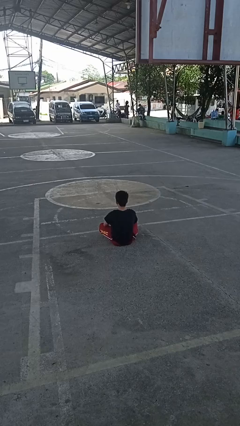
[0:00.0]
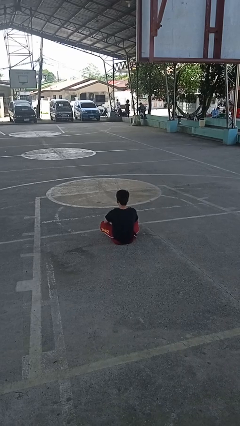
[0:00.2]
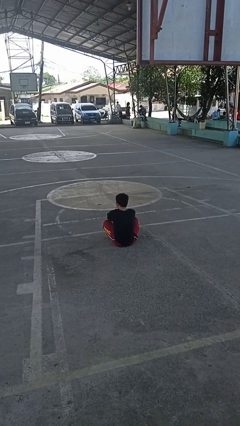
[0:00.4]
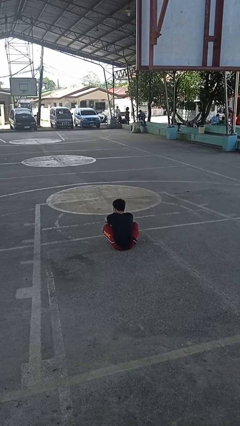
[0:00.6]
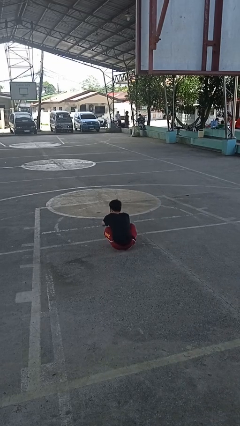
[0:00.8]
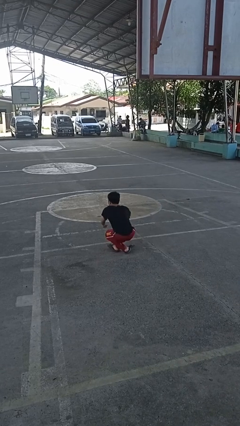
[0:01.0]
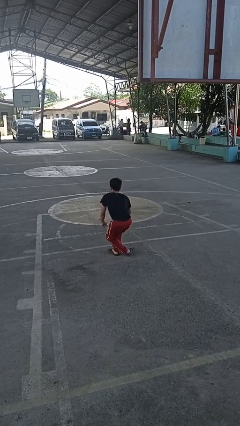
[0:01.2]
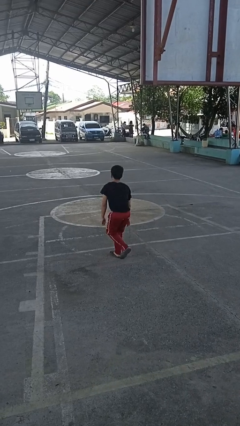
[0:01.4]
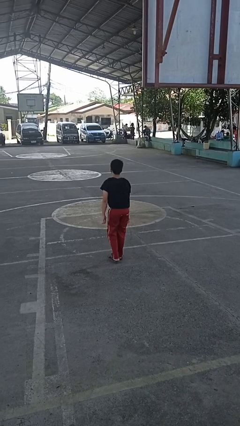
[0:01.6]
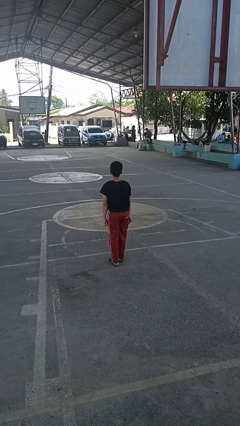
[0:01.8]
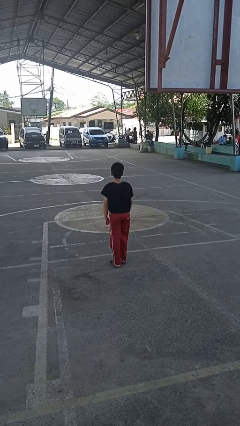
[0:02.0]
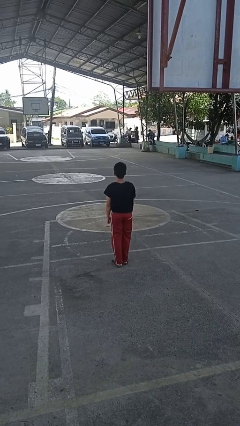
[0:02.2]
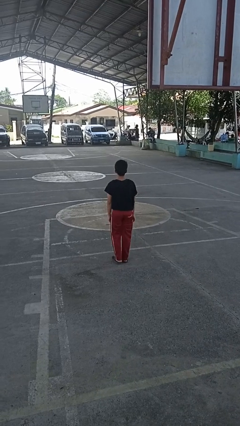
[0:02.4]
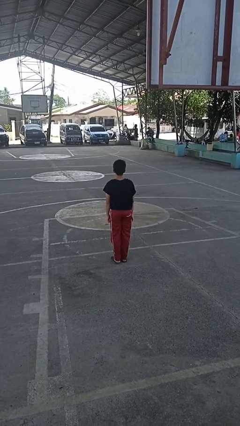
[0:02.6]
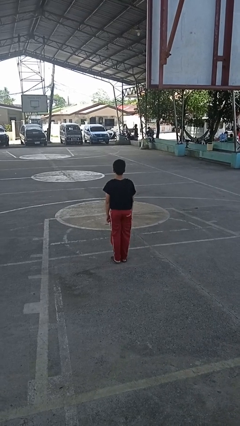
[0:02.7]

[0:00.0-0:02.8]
person stands up from floor

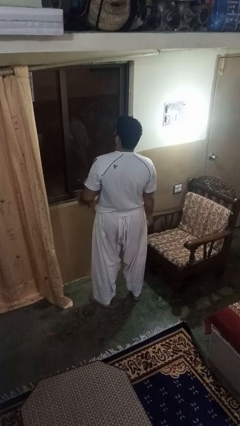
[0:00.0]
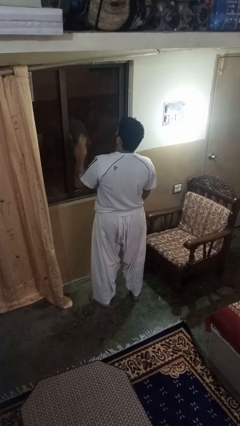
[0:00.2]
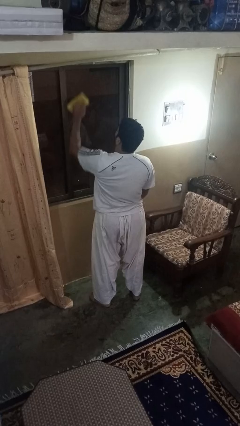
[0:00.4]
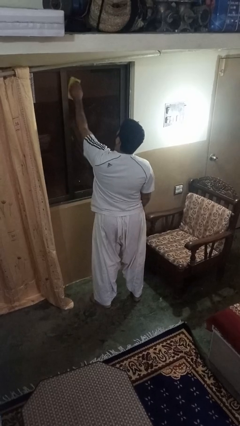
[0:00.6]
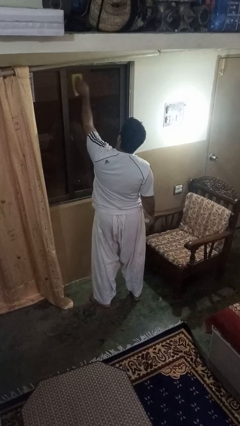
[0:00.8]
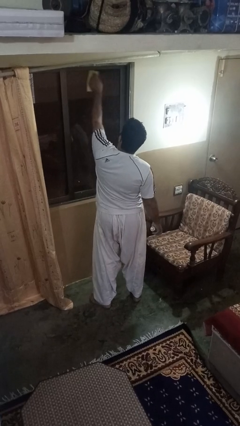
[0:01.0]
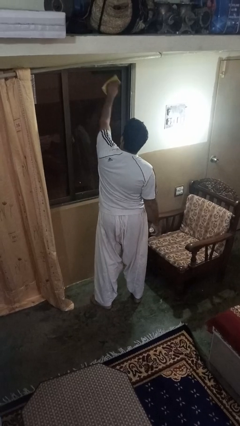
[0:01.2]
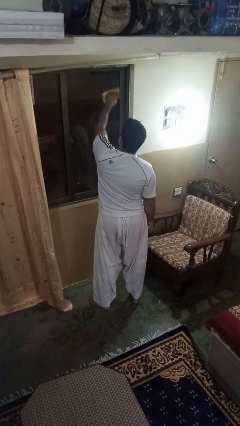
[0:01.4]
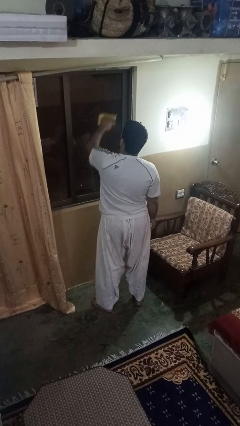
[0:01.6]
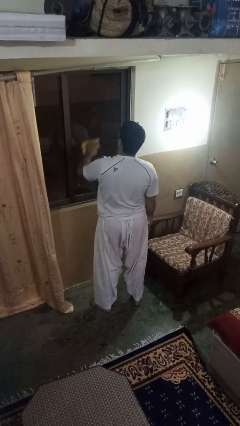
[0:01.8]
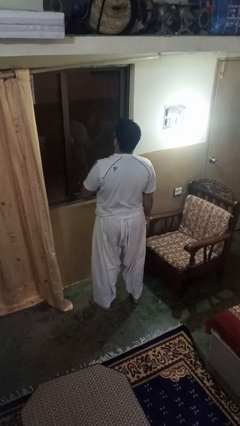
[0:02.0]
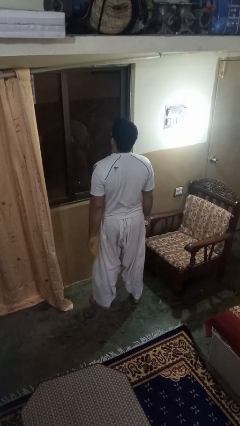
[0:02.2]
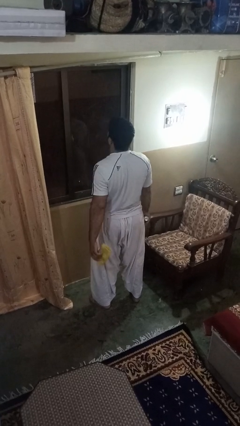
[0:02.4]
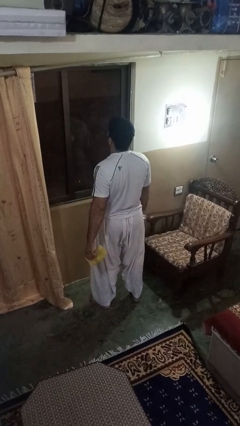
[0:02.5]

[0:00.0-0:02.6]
person washes window

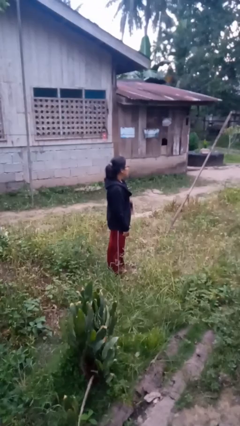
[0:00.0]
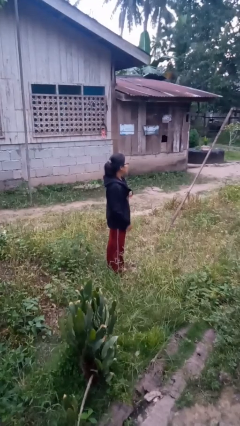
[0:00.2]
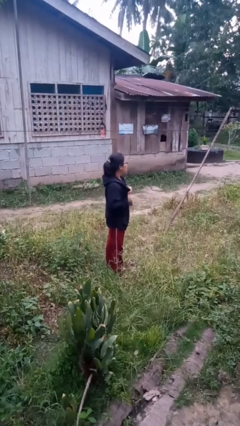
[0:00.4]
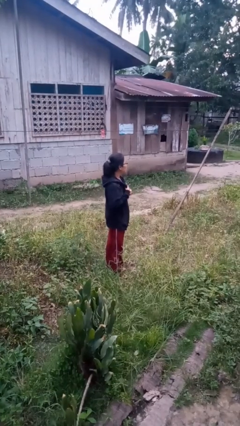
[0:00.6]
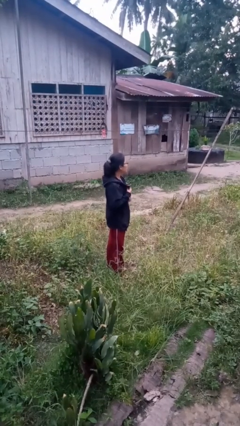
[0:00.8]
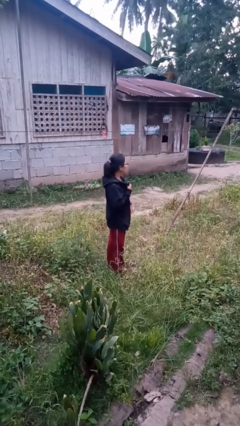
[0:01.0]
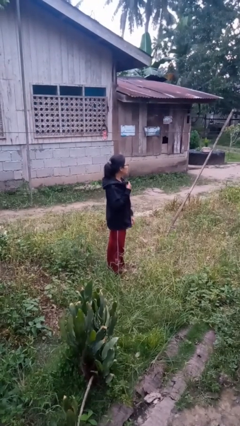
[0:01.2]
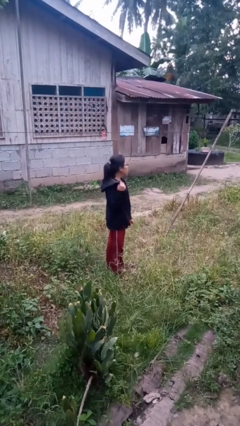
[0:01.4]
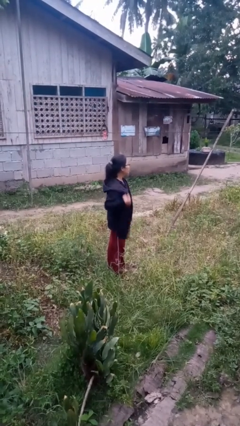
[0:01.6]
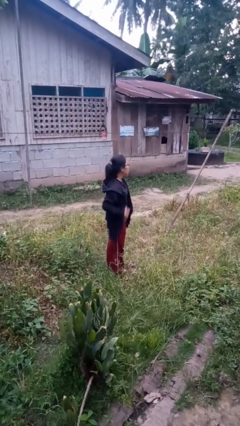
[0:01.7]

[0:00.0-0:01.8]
person unzips jacket

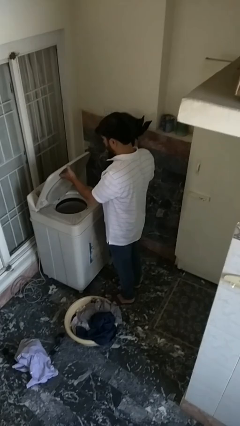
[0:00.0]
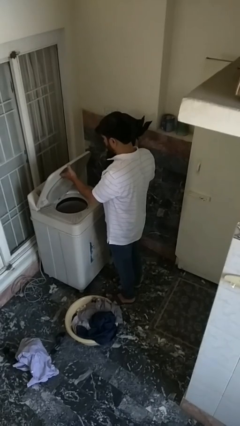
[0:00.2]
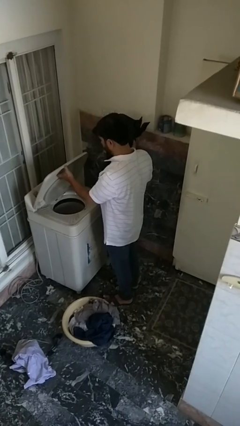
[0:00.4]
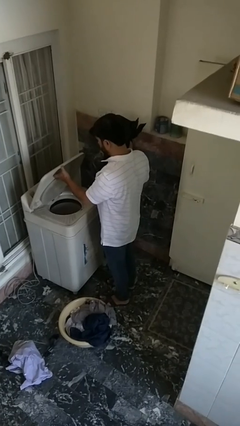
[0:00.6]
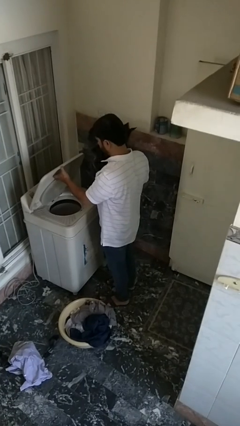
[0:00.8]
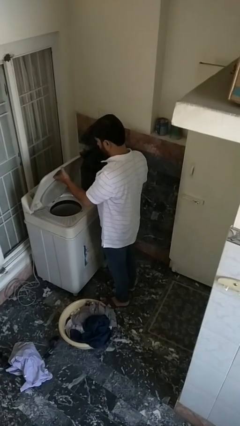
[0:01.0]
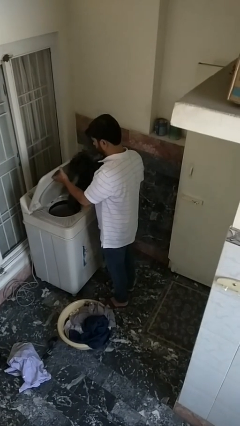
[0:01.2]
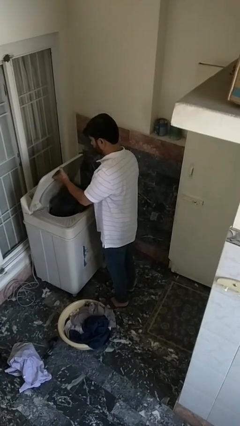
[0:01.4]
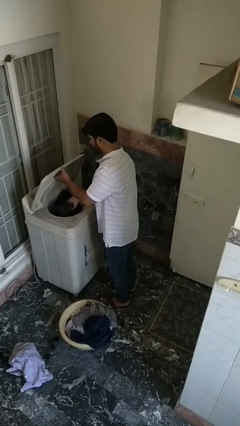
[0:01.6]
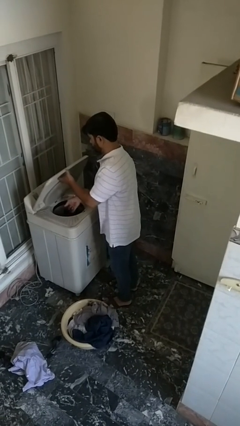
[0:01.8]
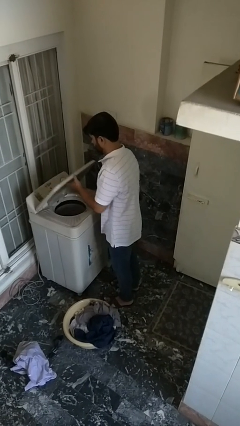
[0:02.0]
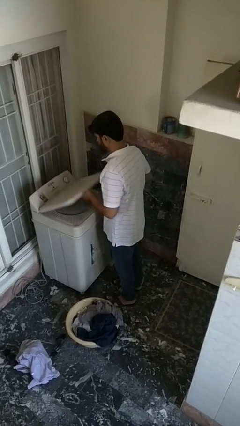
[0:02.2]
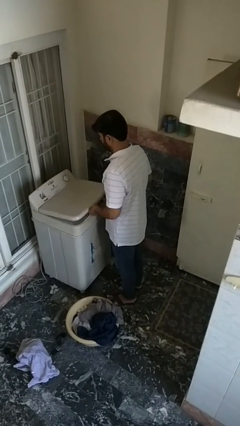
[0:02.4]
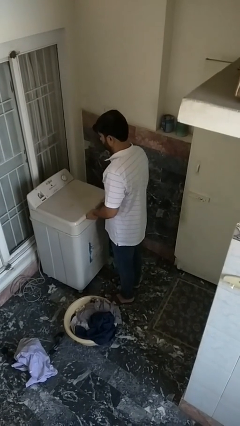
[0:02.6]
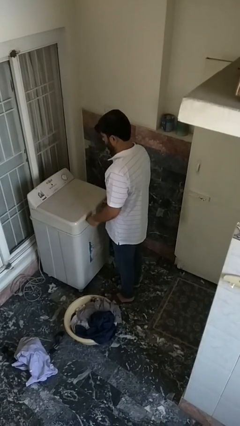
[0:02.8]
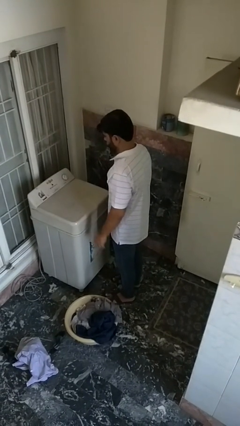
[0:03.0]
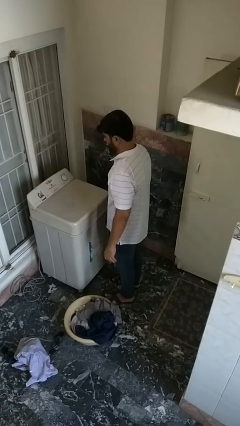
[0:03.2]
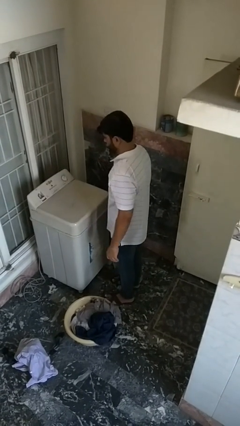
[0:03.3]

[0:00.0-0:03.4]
person loads dryer

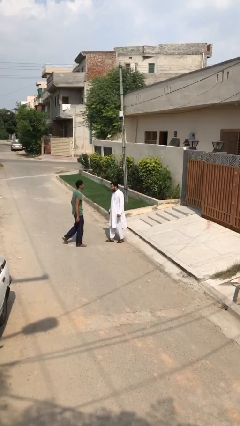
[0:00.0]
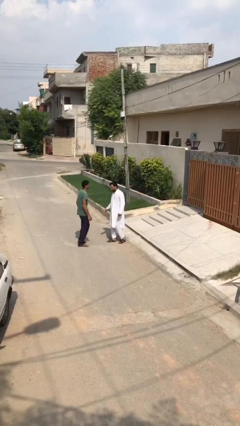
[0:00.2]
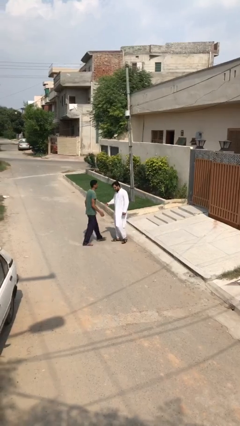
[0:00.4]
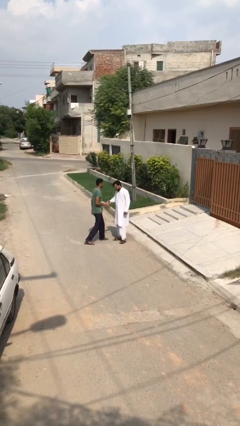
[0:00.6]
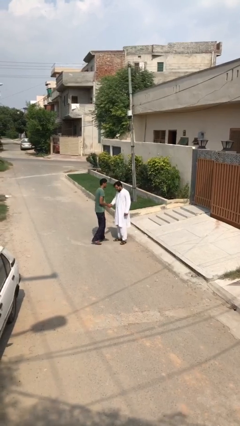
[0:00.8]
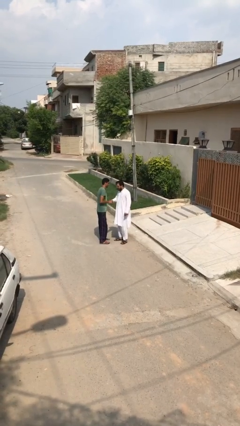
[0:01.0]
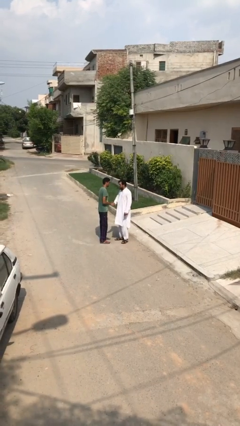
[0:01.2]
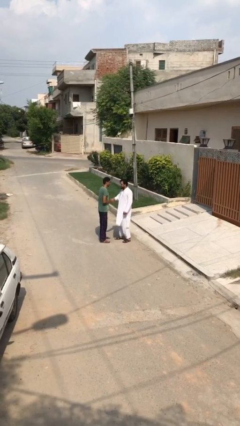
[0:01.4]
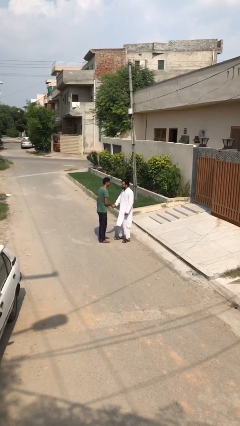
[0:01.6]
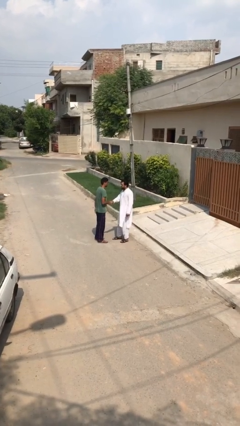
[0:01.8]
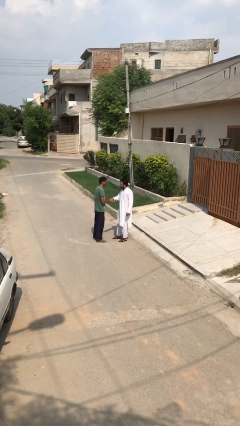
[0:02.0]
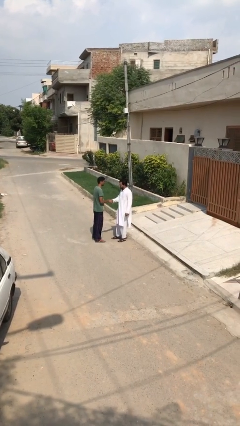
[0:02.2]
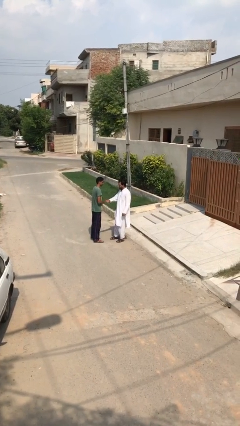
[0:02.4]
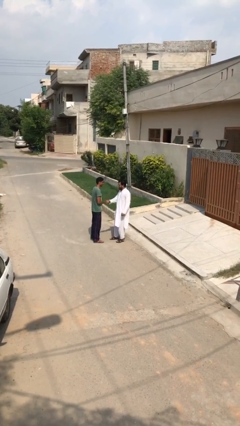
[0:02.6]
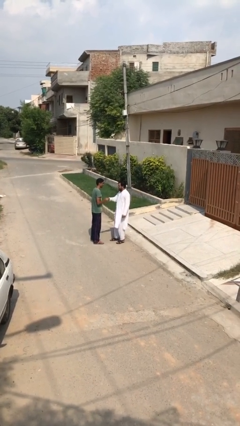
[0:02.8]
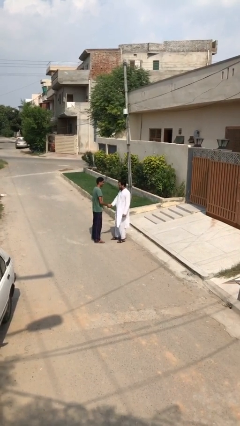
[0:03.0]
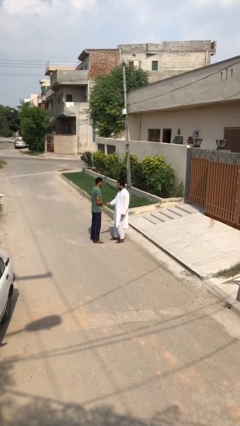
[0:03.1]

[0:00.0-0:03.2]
person shakes hand

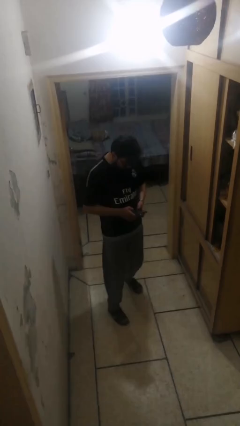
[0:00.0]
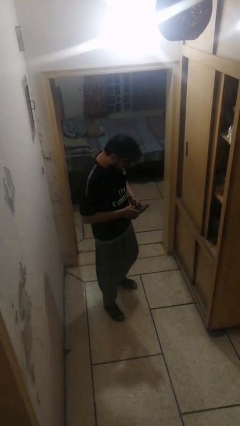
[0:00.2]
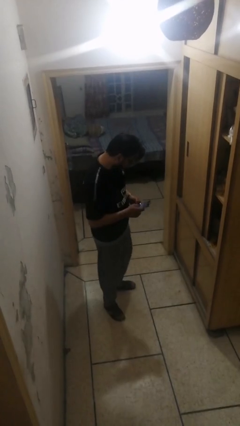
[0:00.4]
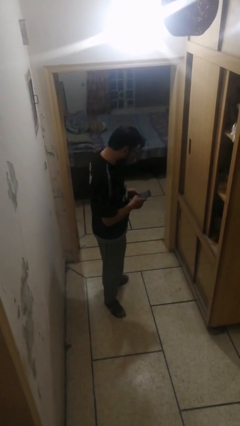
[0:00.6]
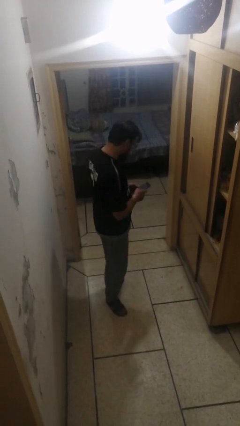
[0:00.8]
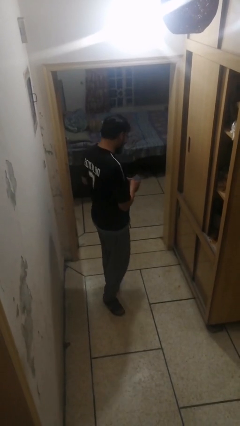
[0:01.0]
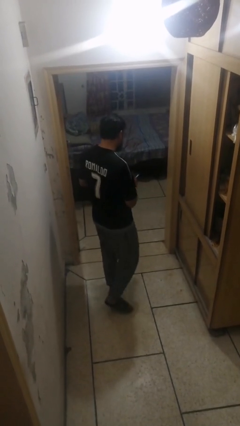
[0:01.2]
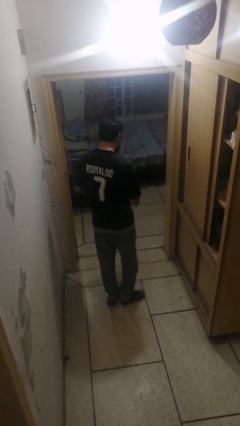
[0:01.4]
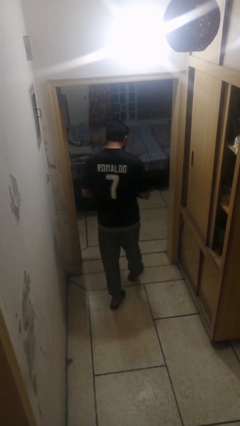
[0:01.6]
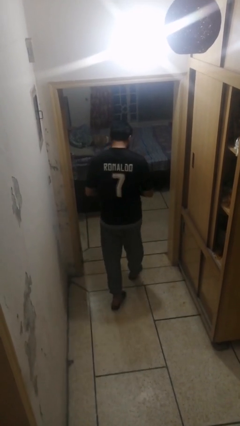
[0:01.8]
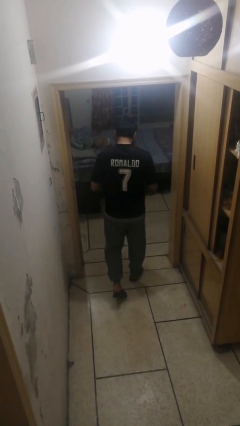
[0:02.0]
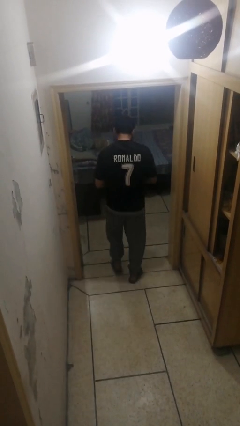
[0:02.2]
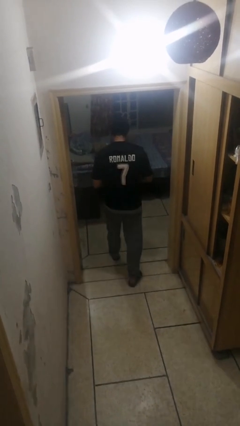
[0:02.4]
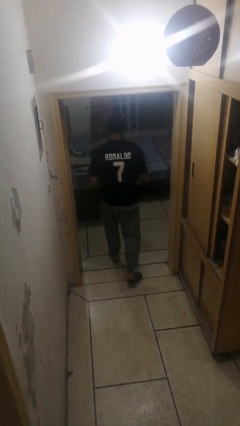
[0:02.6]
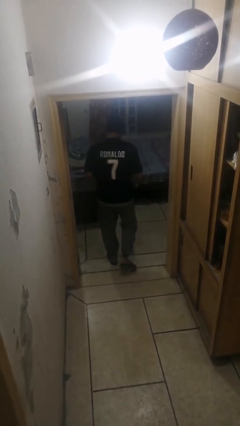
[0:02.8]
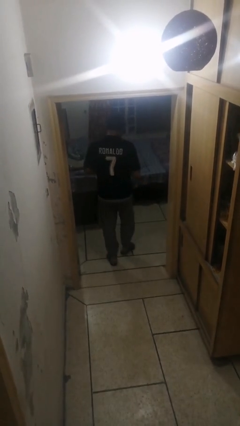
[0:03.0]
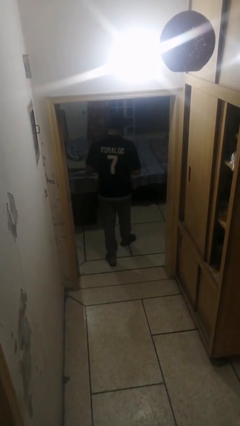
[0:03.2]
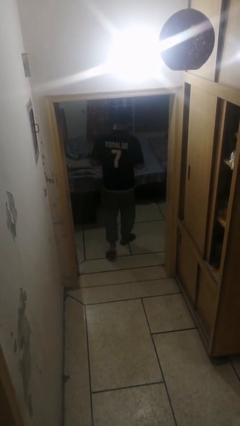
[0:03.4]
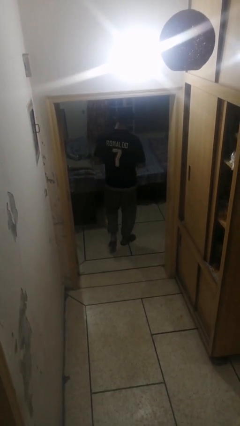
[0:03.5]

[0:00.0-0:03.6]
person exits scene through structure
